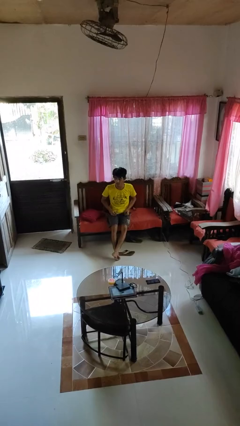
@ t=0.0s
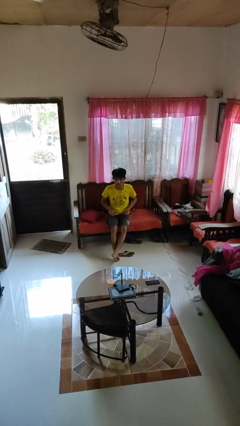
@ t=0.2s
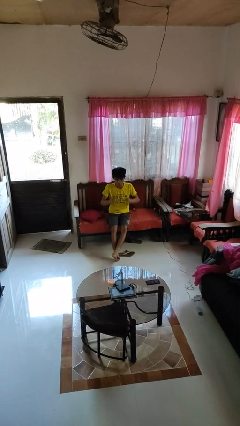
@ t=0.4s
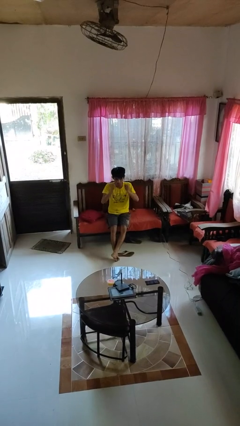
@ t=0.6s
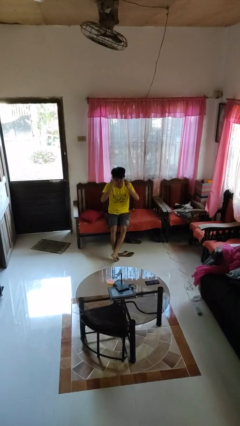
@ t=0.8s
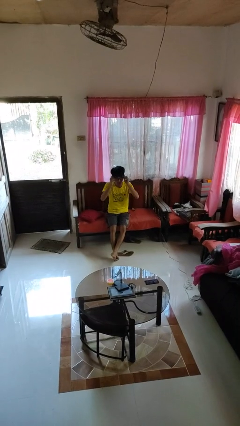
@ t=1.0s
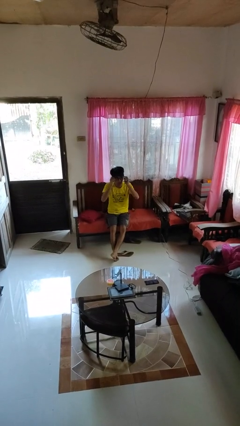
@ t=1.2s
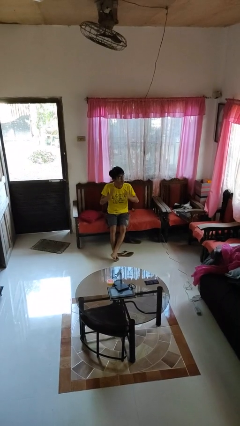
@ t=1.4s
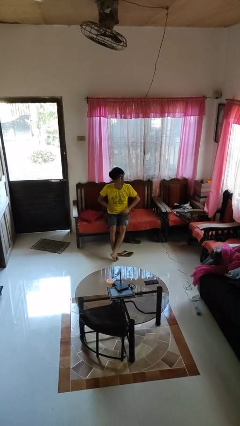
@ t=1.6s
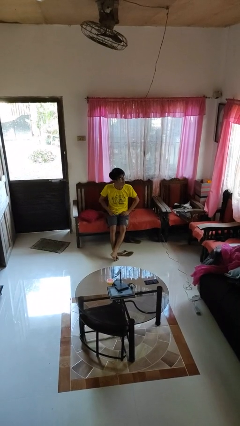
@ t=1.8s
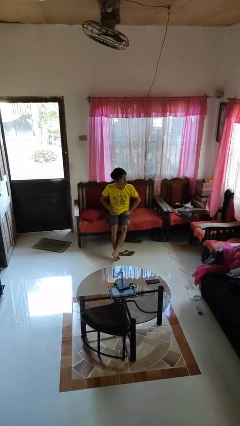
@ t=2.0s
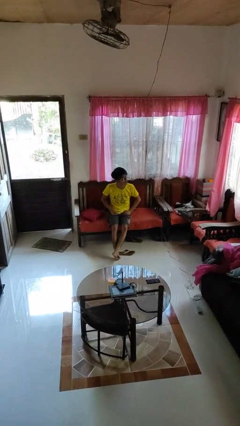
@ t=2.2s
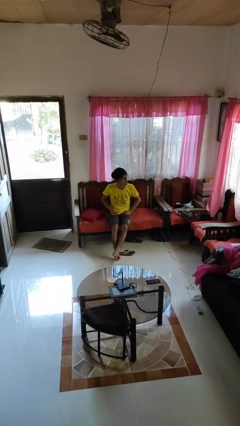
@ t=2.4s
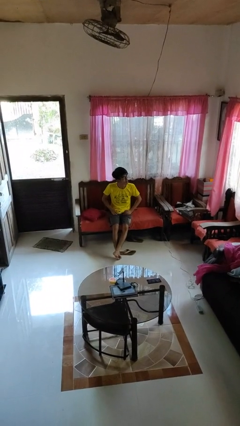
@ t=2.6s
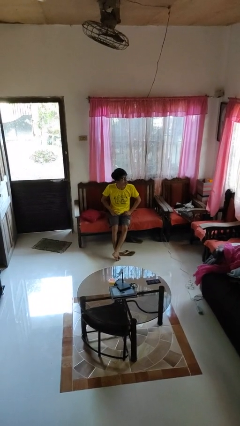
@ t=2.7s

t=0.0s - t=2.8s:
person puts on glasses

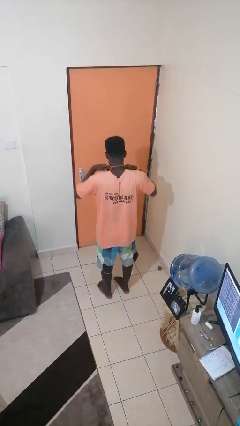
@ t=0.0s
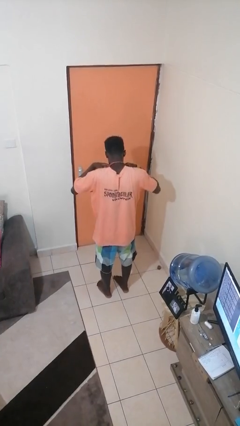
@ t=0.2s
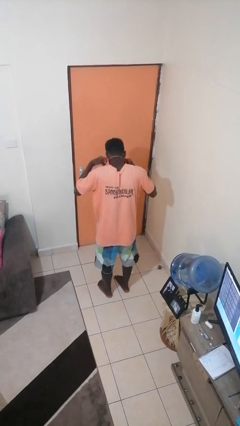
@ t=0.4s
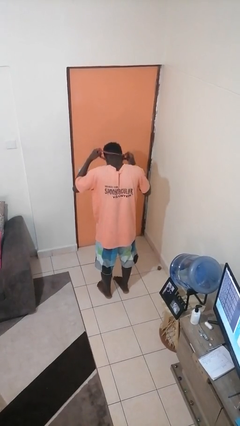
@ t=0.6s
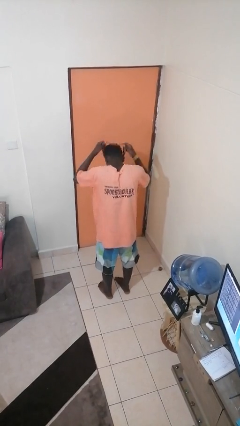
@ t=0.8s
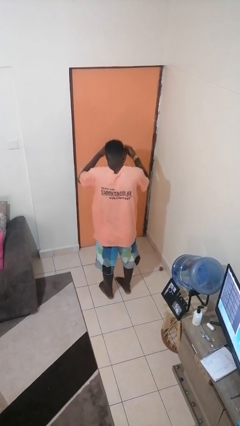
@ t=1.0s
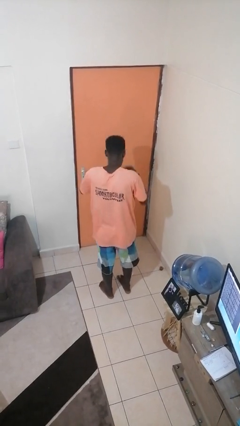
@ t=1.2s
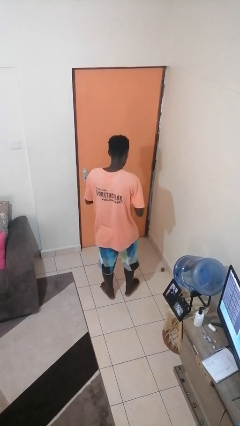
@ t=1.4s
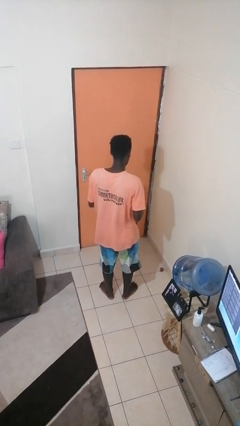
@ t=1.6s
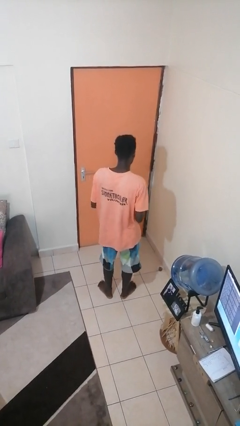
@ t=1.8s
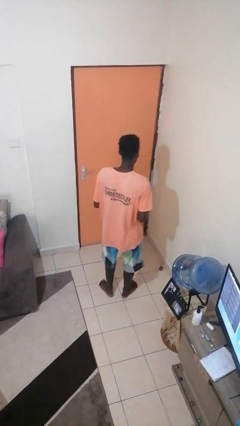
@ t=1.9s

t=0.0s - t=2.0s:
person takes off necklace

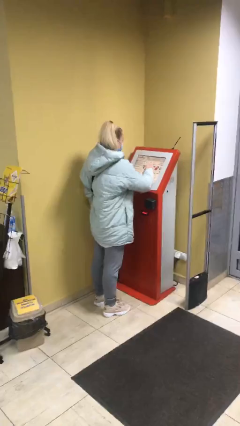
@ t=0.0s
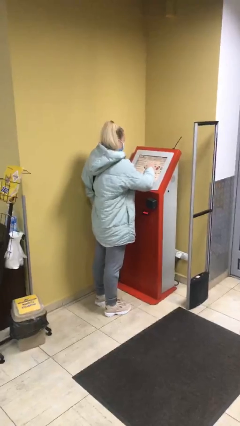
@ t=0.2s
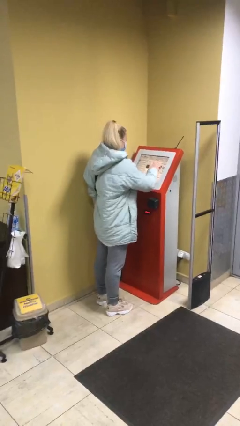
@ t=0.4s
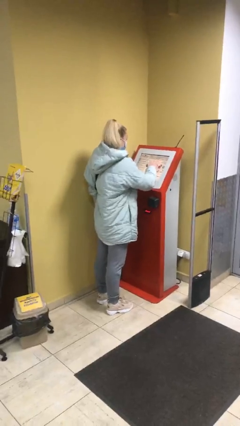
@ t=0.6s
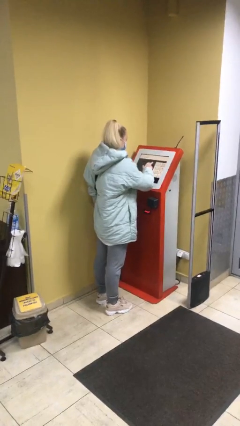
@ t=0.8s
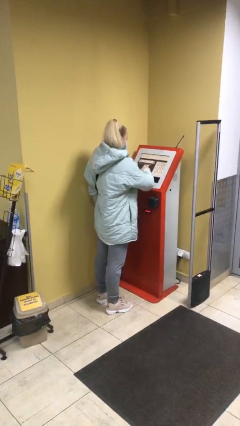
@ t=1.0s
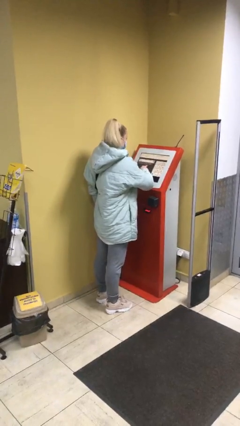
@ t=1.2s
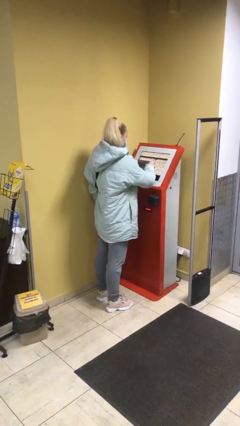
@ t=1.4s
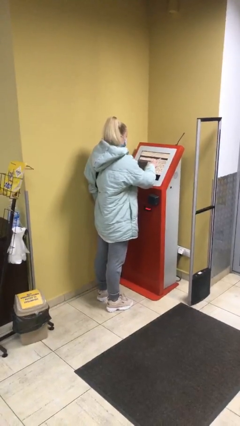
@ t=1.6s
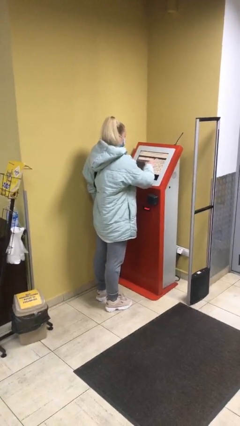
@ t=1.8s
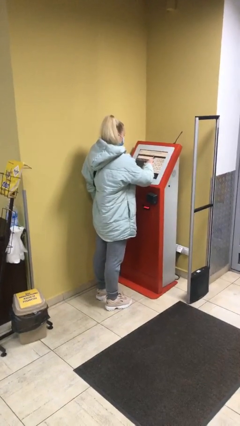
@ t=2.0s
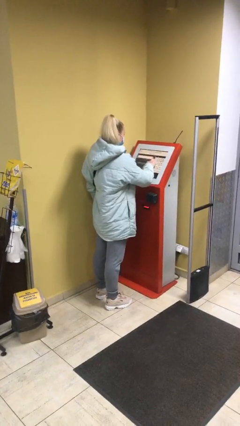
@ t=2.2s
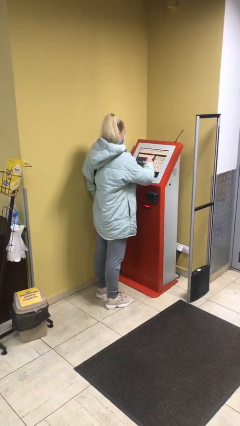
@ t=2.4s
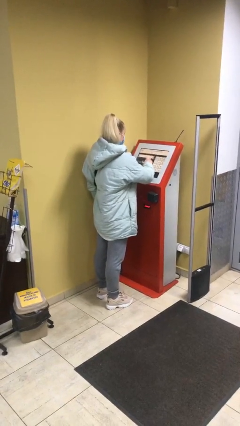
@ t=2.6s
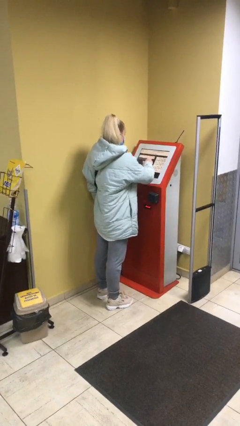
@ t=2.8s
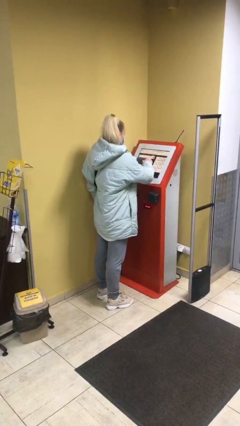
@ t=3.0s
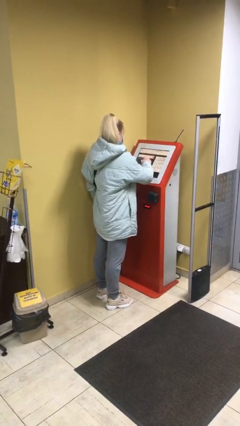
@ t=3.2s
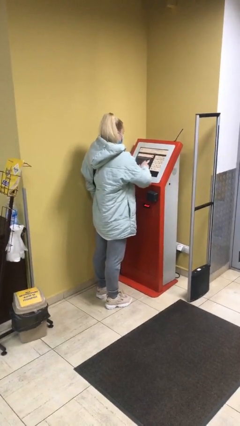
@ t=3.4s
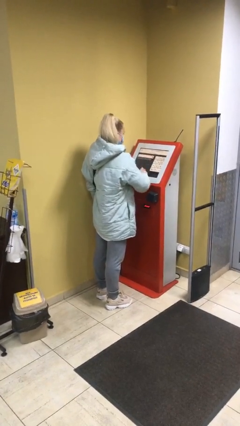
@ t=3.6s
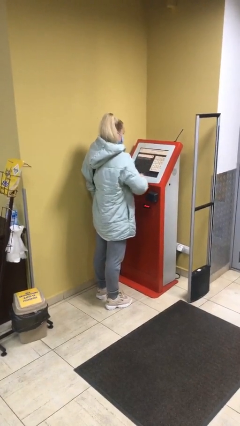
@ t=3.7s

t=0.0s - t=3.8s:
person purchases from machine

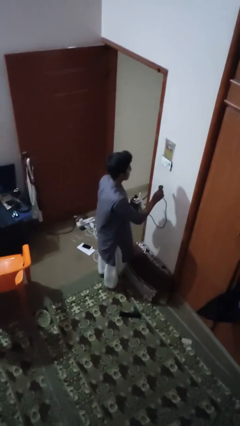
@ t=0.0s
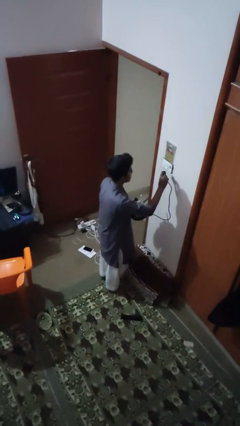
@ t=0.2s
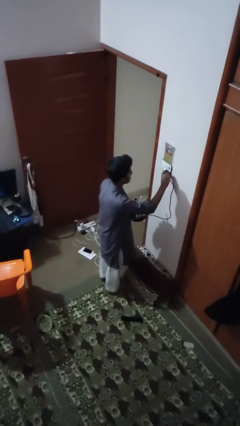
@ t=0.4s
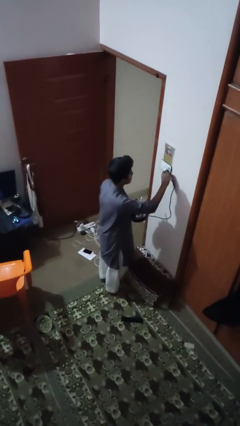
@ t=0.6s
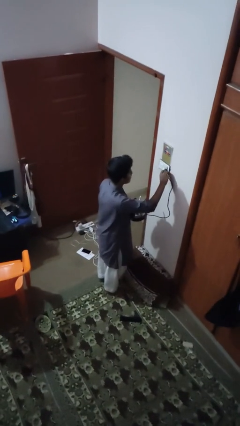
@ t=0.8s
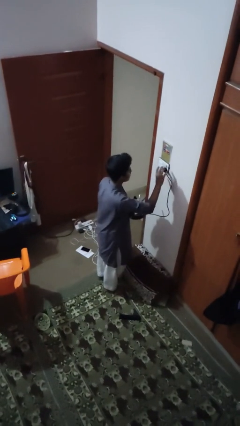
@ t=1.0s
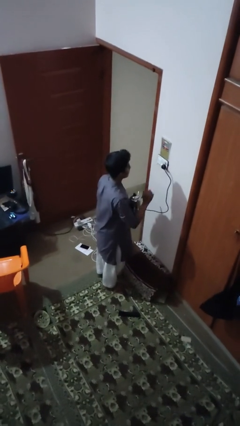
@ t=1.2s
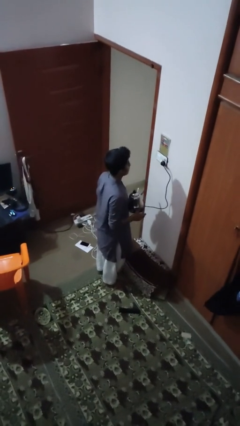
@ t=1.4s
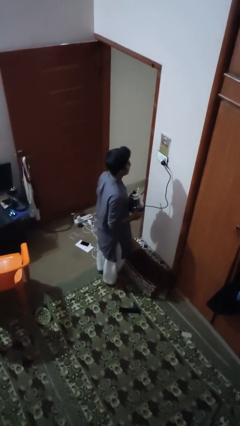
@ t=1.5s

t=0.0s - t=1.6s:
person plugs into electrical socket

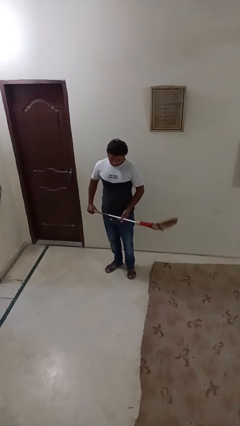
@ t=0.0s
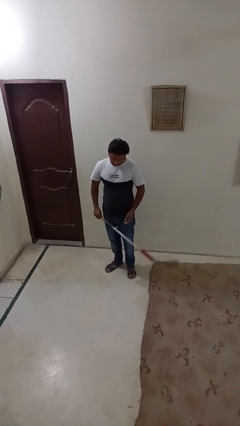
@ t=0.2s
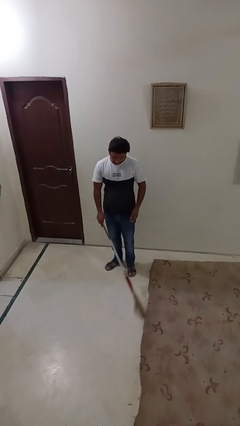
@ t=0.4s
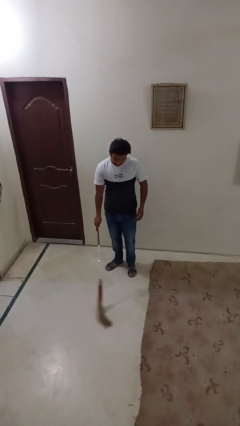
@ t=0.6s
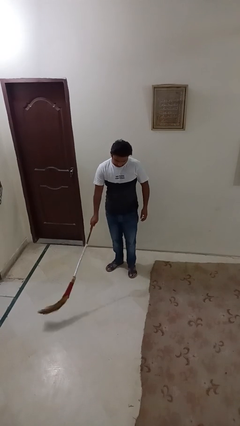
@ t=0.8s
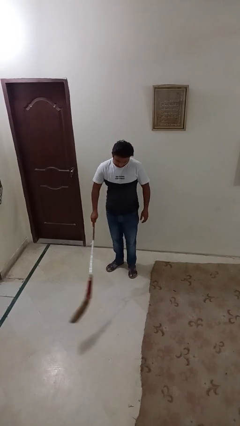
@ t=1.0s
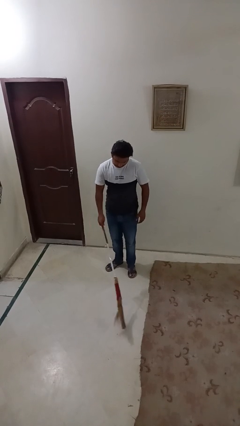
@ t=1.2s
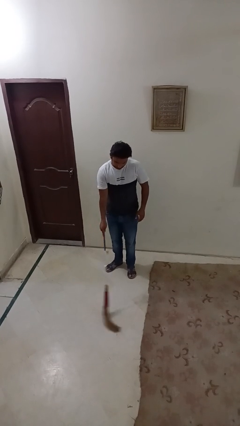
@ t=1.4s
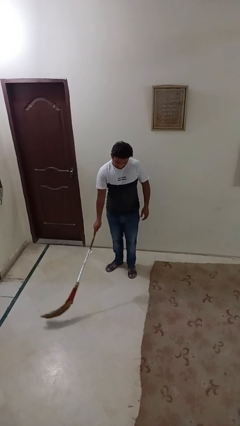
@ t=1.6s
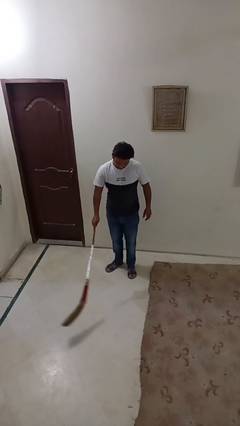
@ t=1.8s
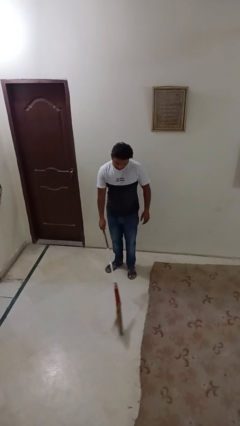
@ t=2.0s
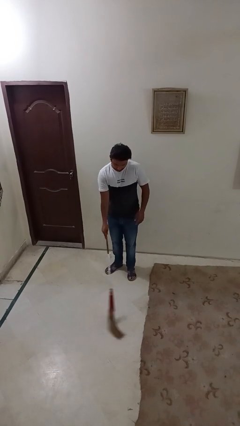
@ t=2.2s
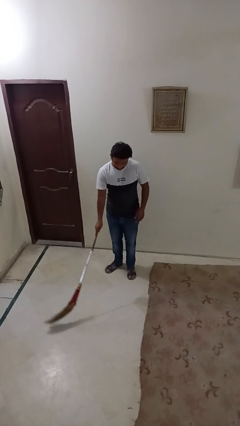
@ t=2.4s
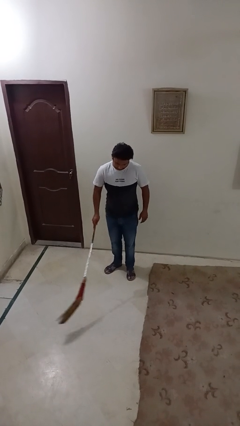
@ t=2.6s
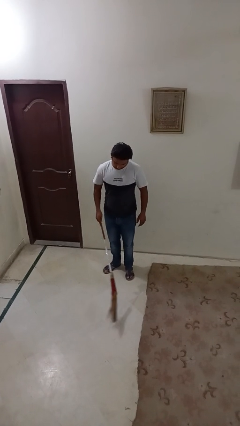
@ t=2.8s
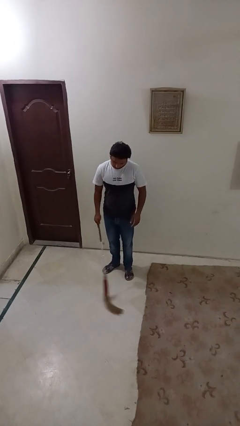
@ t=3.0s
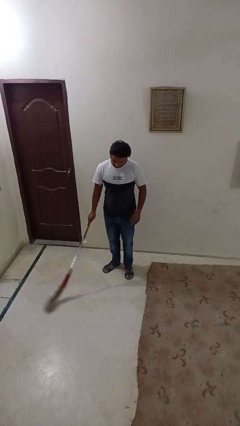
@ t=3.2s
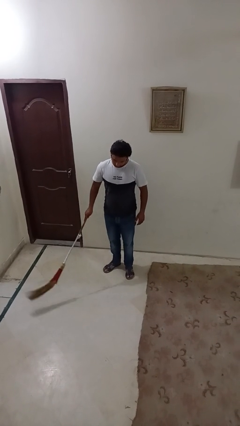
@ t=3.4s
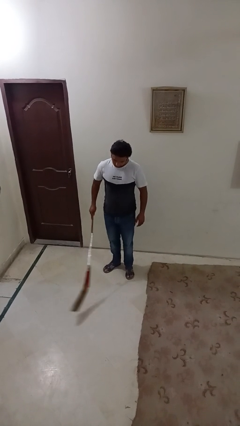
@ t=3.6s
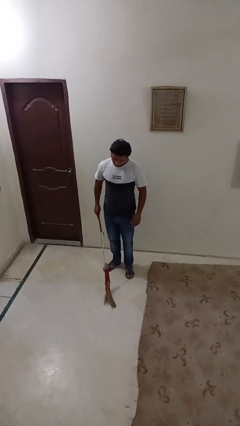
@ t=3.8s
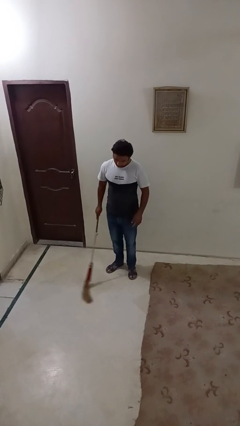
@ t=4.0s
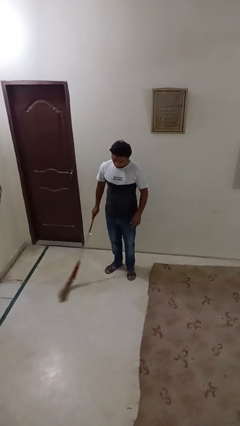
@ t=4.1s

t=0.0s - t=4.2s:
person sweeps floor

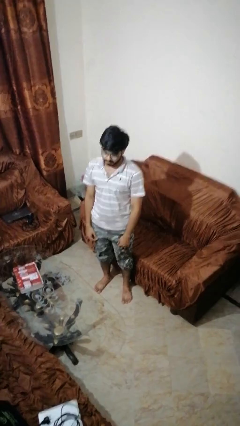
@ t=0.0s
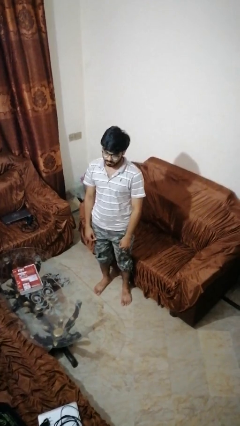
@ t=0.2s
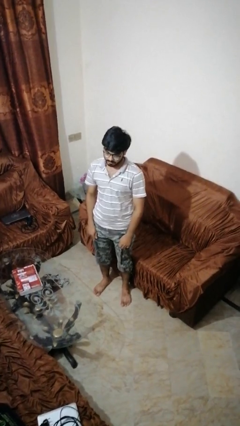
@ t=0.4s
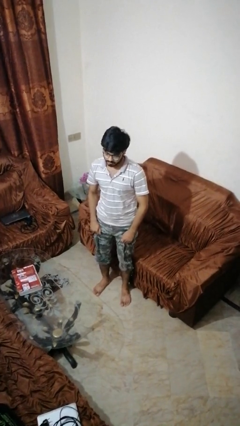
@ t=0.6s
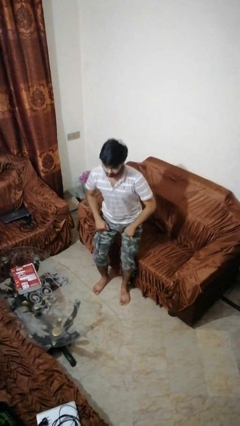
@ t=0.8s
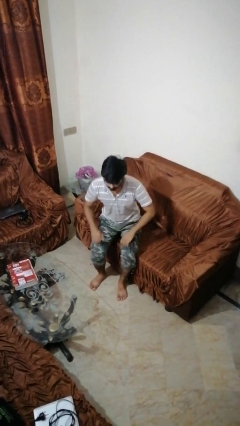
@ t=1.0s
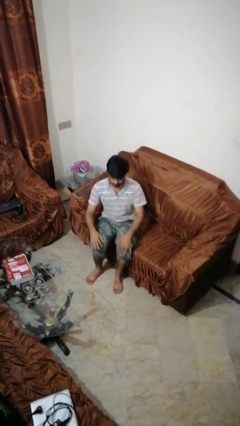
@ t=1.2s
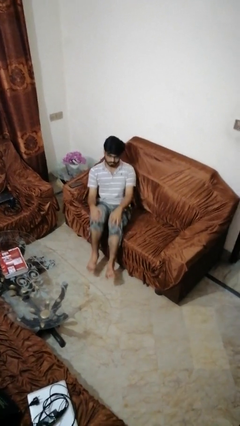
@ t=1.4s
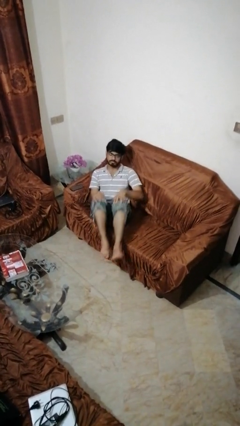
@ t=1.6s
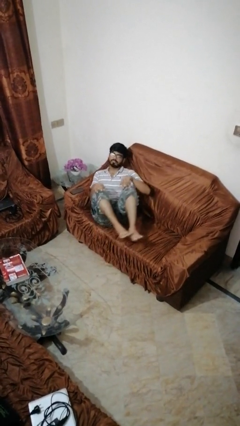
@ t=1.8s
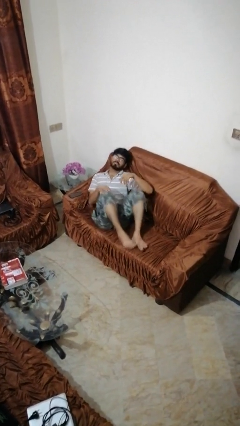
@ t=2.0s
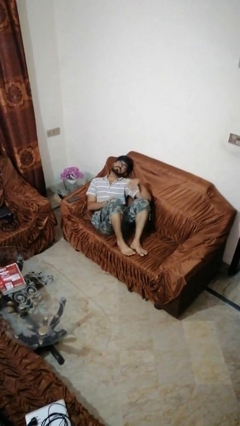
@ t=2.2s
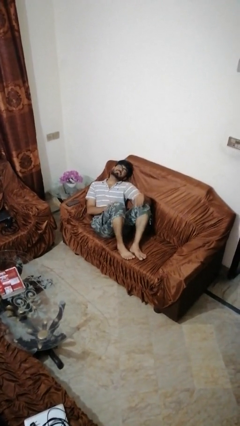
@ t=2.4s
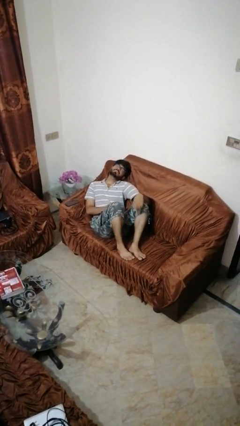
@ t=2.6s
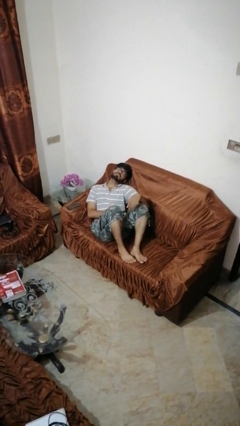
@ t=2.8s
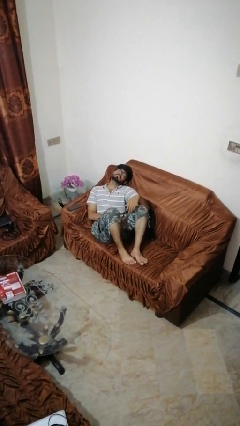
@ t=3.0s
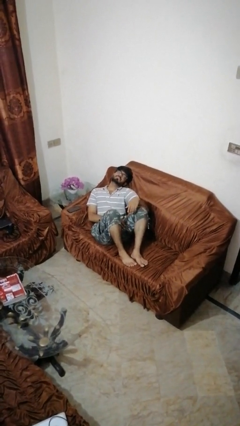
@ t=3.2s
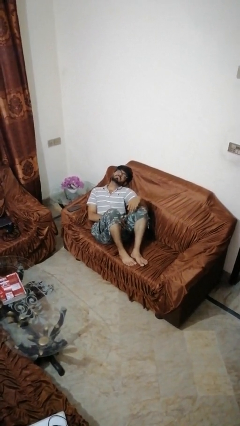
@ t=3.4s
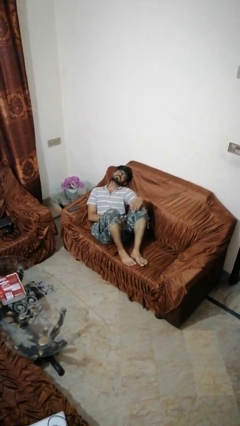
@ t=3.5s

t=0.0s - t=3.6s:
person lies down on couch
